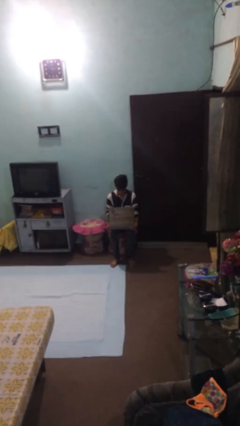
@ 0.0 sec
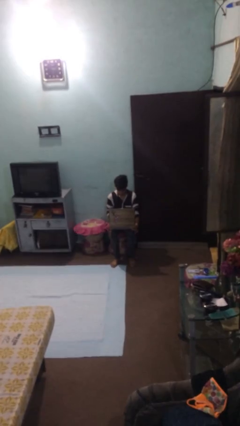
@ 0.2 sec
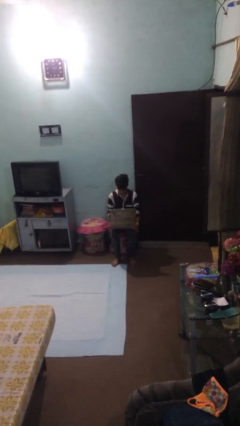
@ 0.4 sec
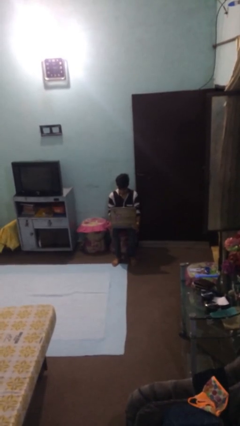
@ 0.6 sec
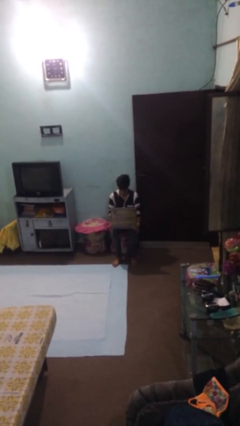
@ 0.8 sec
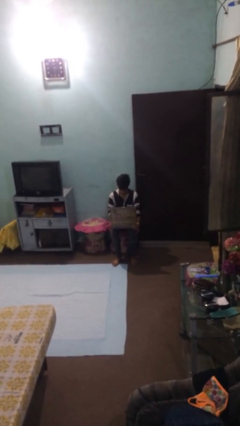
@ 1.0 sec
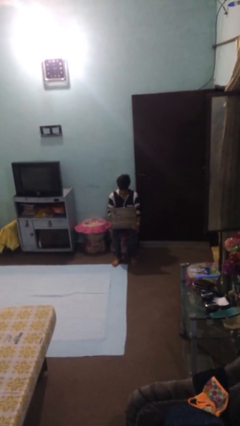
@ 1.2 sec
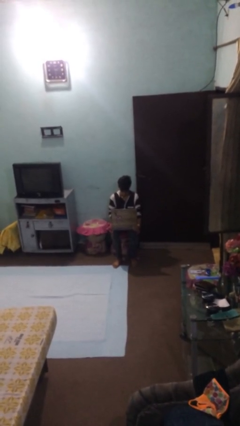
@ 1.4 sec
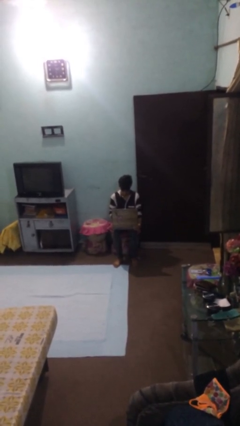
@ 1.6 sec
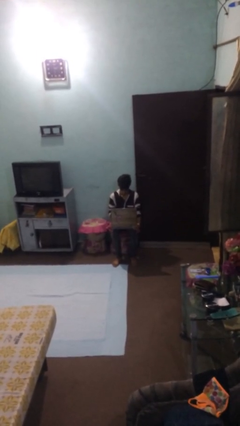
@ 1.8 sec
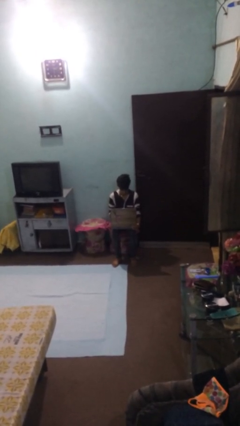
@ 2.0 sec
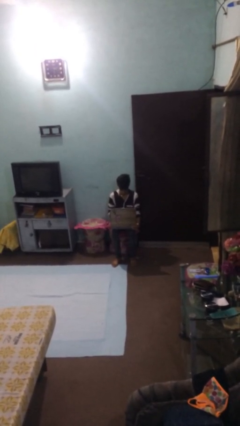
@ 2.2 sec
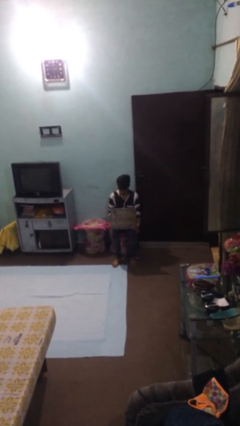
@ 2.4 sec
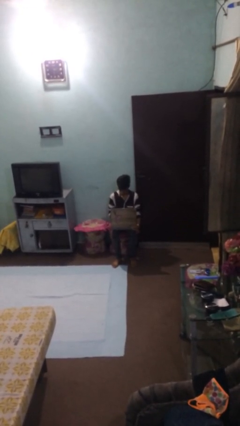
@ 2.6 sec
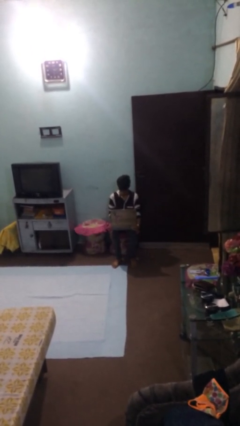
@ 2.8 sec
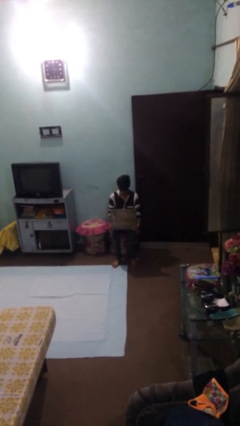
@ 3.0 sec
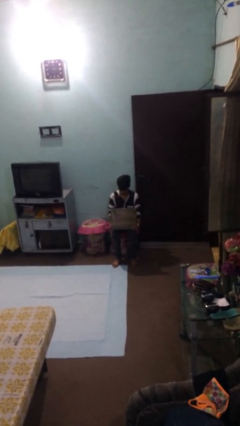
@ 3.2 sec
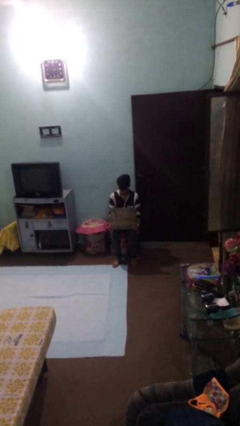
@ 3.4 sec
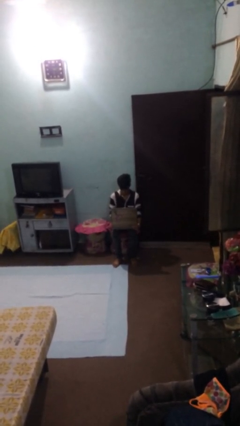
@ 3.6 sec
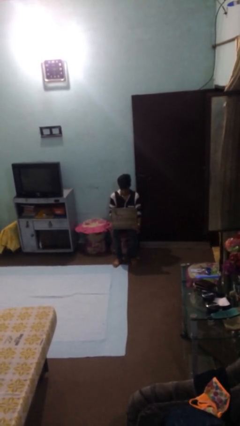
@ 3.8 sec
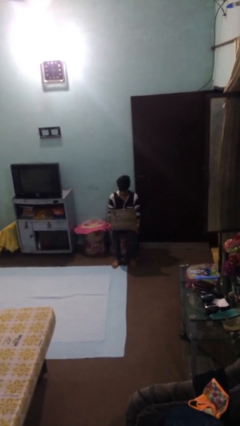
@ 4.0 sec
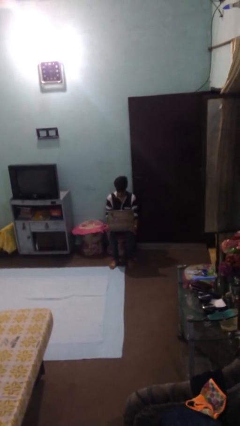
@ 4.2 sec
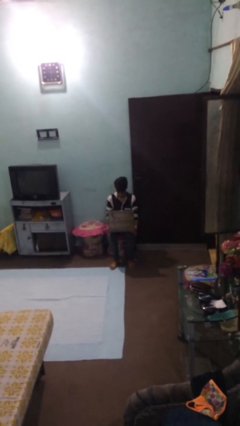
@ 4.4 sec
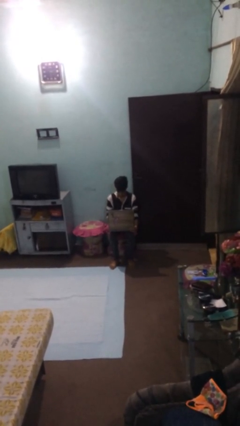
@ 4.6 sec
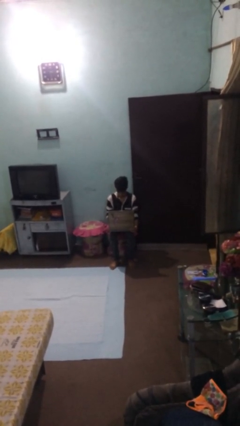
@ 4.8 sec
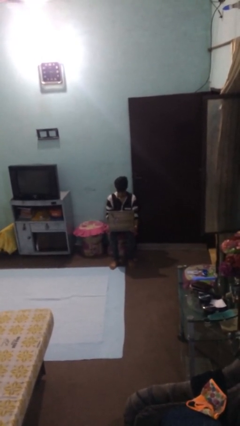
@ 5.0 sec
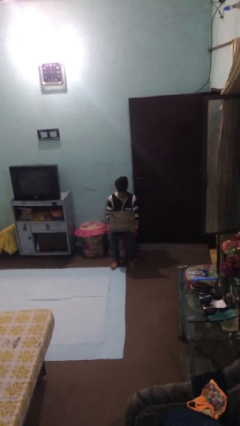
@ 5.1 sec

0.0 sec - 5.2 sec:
person interacts with laptop

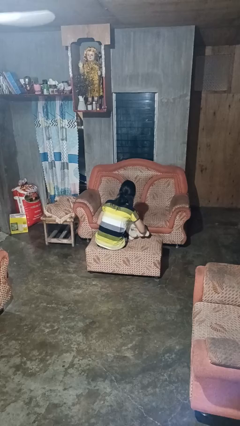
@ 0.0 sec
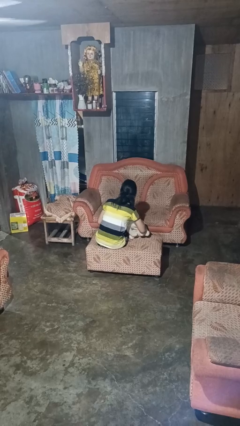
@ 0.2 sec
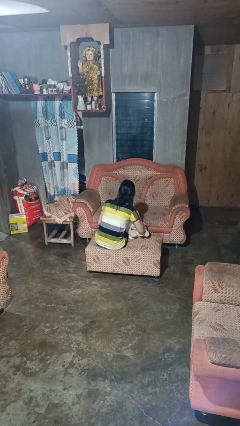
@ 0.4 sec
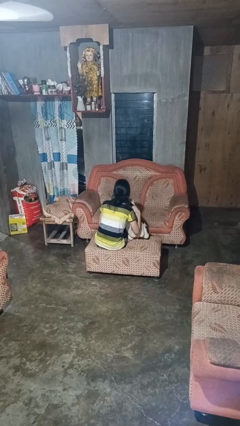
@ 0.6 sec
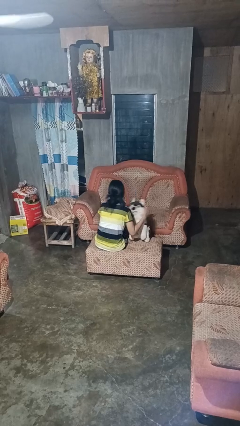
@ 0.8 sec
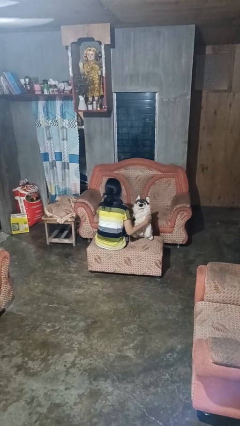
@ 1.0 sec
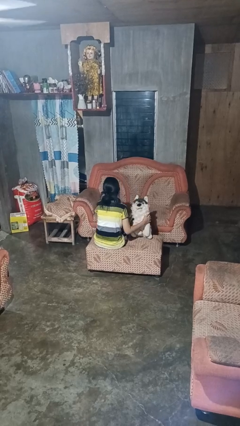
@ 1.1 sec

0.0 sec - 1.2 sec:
person hugs stuffed animal

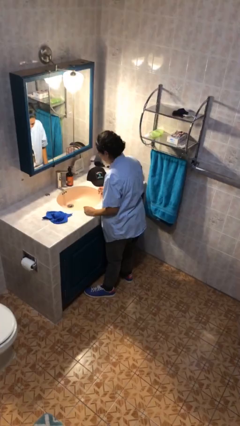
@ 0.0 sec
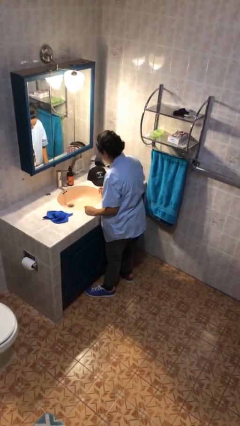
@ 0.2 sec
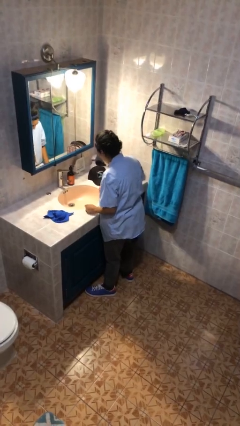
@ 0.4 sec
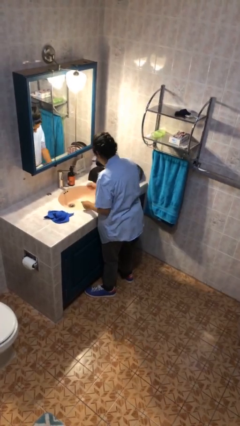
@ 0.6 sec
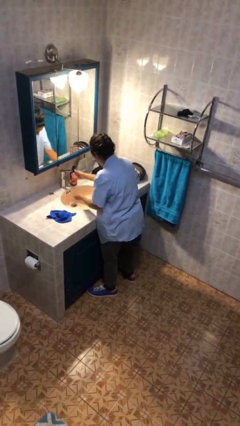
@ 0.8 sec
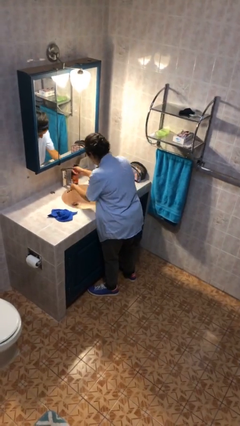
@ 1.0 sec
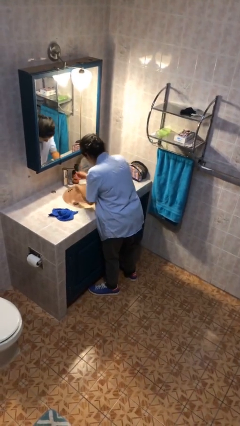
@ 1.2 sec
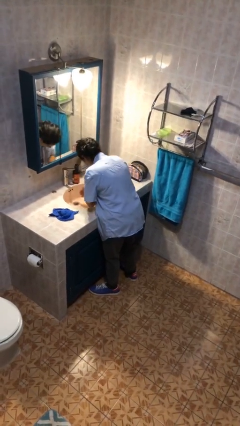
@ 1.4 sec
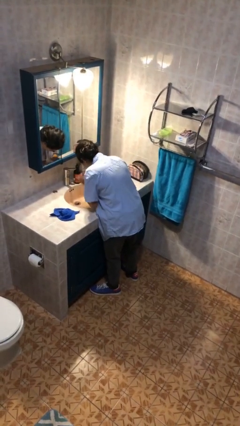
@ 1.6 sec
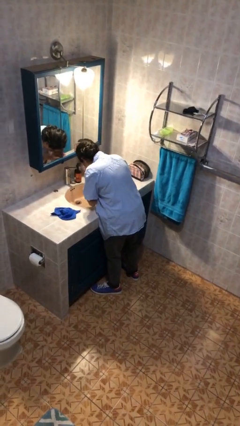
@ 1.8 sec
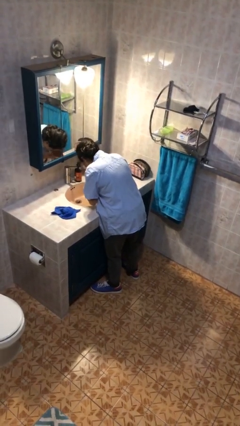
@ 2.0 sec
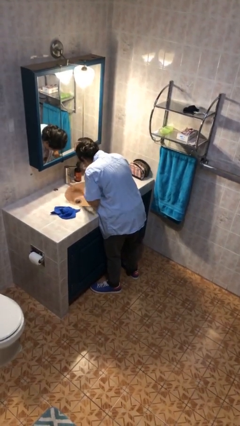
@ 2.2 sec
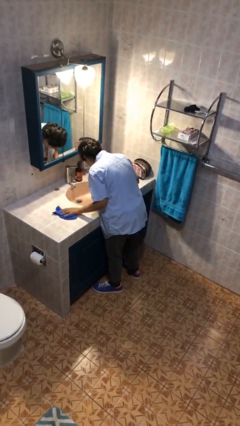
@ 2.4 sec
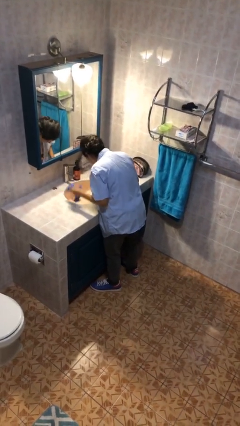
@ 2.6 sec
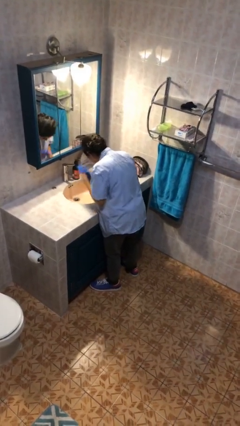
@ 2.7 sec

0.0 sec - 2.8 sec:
person washes face

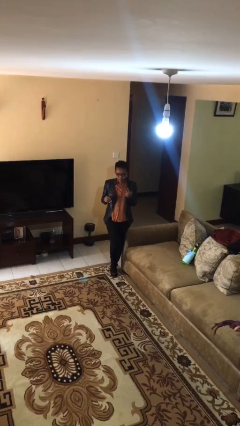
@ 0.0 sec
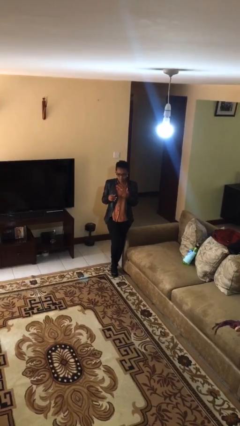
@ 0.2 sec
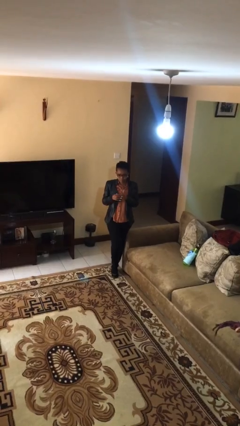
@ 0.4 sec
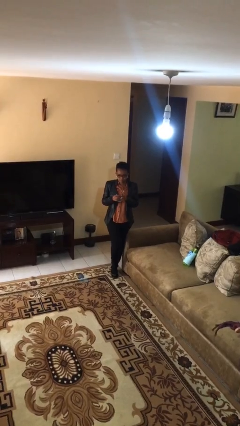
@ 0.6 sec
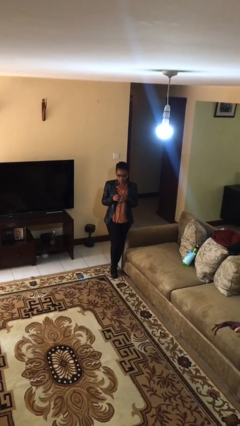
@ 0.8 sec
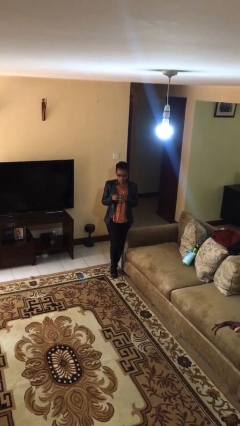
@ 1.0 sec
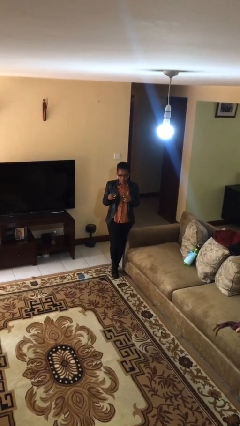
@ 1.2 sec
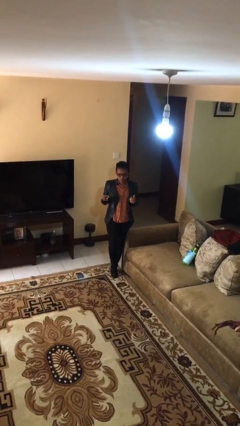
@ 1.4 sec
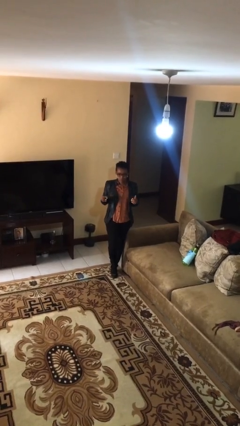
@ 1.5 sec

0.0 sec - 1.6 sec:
person takes off ring

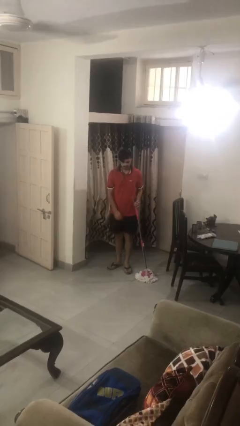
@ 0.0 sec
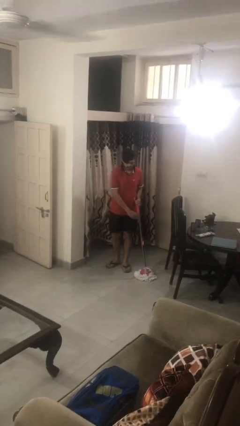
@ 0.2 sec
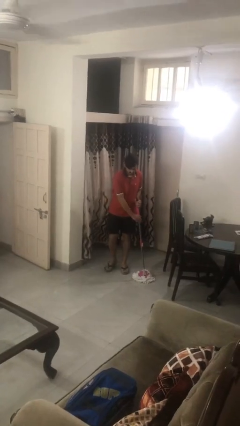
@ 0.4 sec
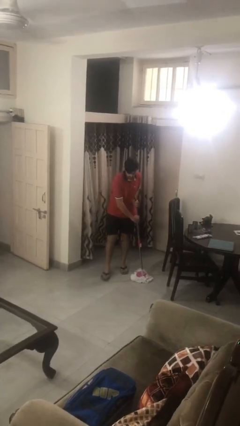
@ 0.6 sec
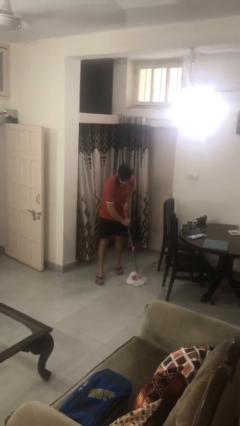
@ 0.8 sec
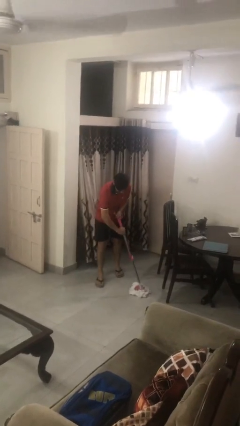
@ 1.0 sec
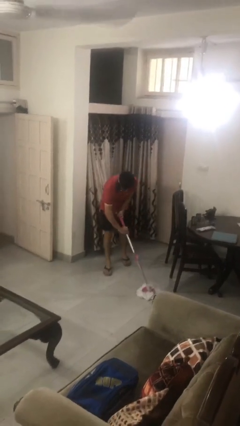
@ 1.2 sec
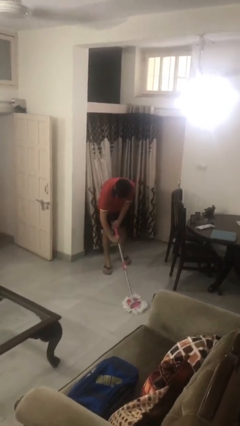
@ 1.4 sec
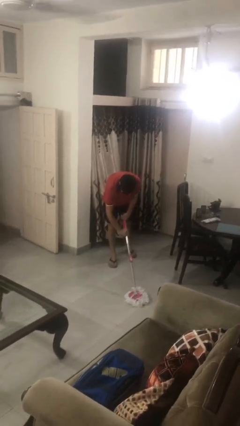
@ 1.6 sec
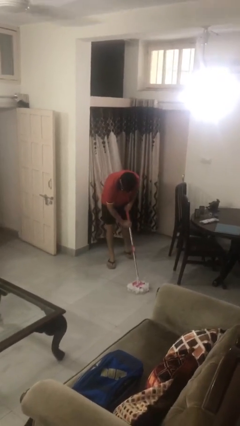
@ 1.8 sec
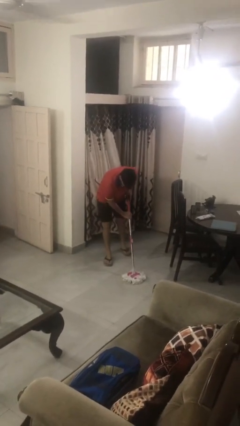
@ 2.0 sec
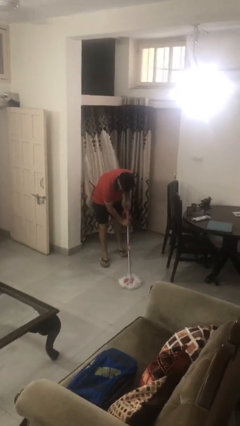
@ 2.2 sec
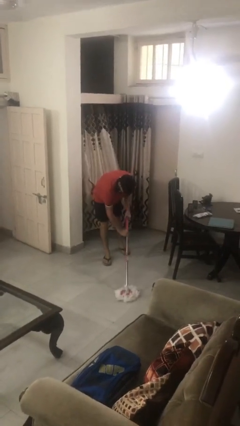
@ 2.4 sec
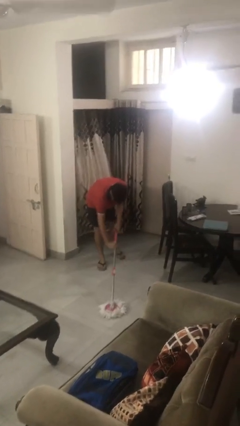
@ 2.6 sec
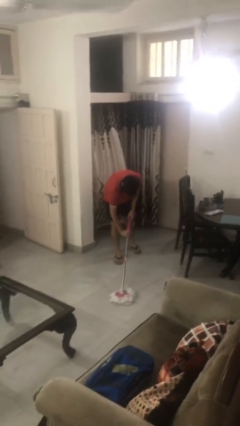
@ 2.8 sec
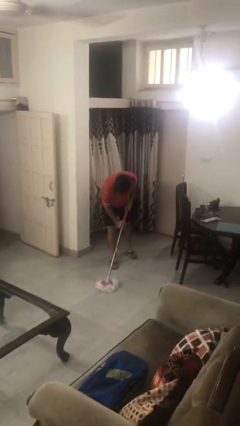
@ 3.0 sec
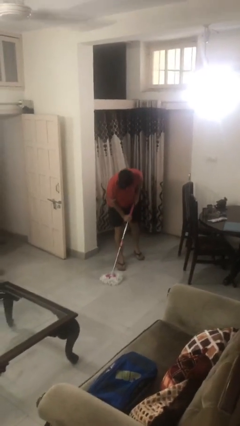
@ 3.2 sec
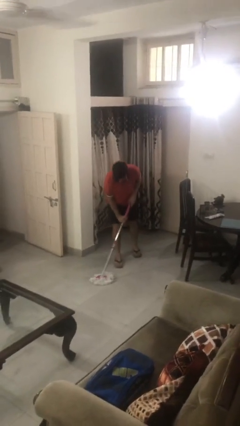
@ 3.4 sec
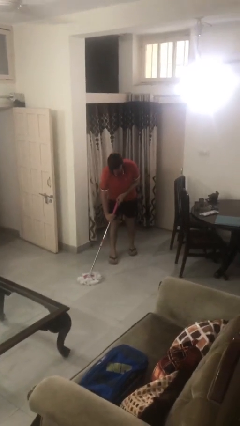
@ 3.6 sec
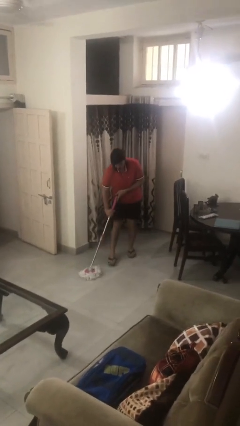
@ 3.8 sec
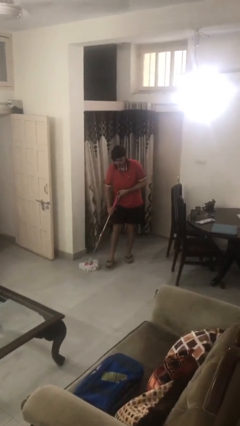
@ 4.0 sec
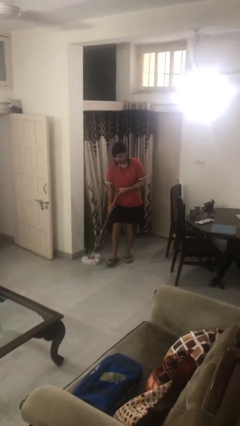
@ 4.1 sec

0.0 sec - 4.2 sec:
person mops

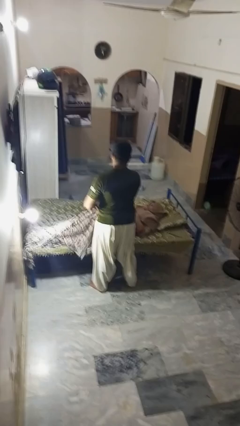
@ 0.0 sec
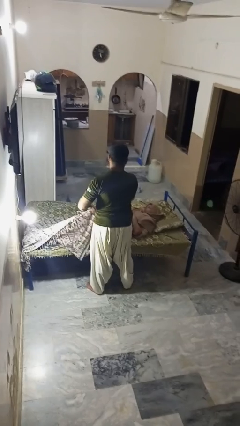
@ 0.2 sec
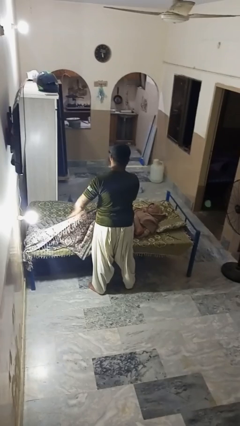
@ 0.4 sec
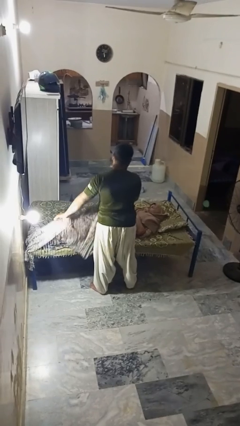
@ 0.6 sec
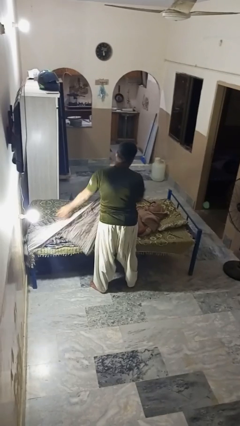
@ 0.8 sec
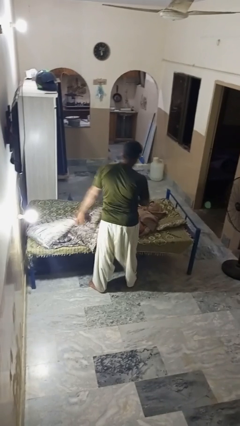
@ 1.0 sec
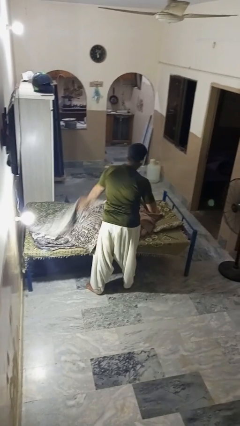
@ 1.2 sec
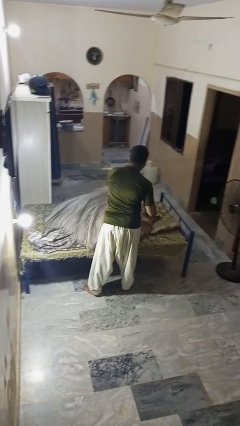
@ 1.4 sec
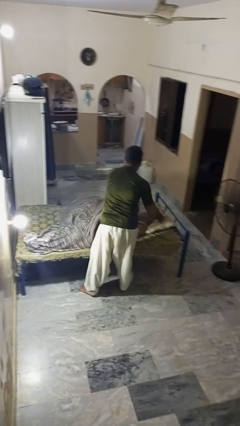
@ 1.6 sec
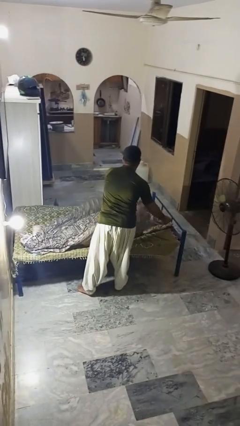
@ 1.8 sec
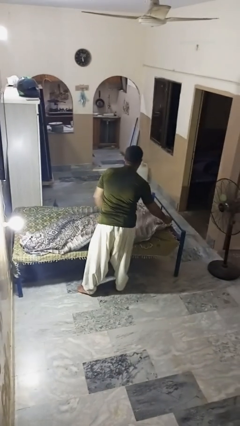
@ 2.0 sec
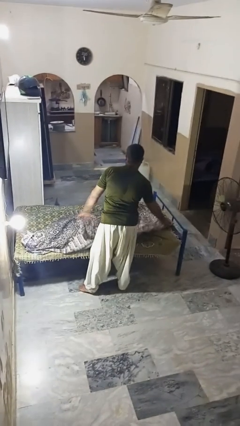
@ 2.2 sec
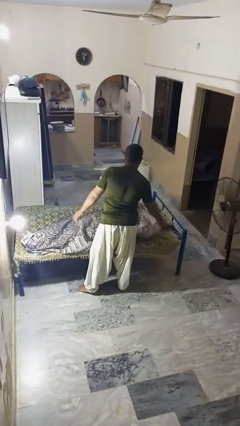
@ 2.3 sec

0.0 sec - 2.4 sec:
person covers friend with blanket
